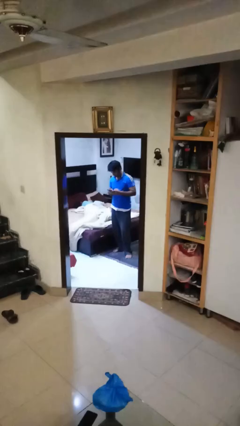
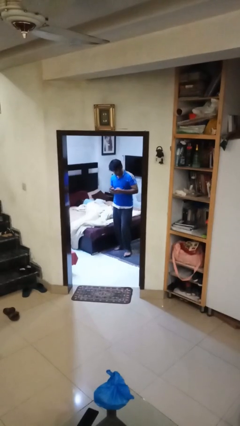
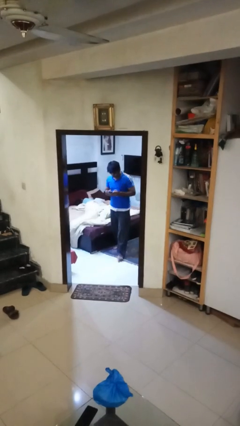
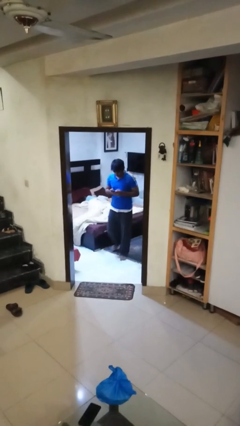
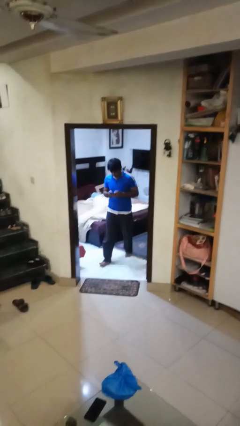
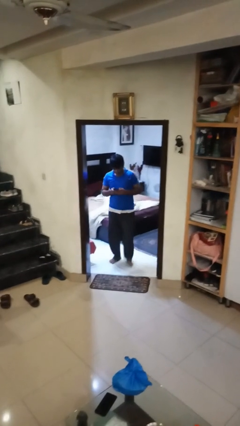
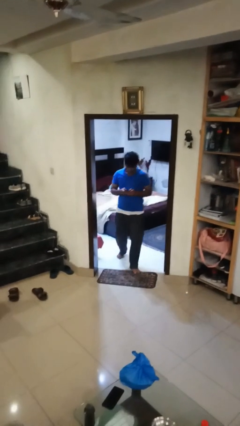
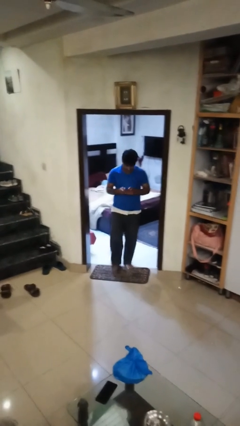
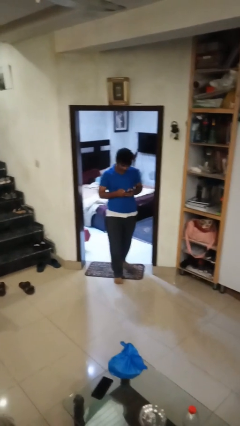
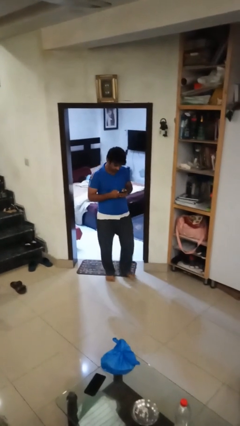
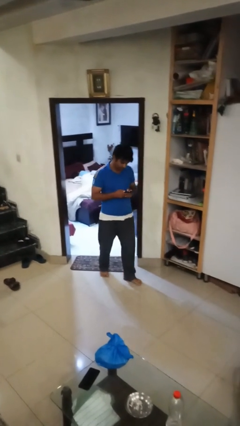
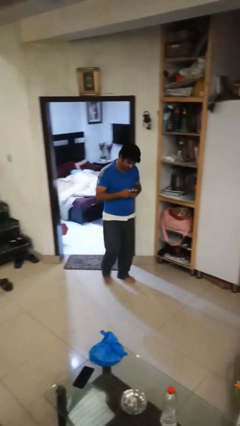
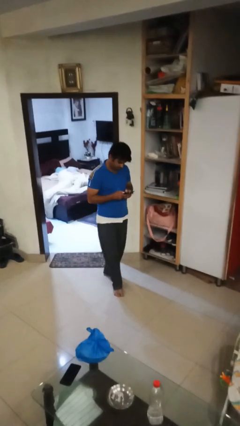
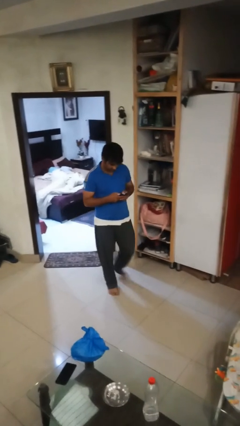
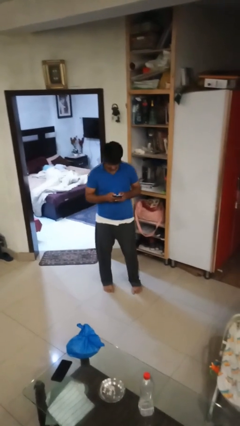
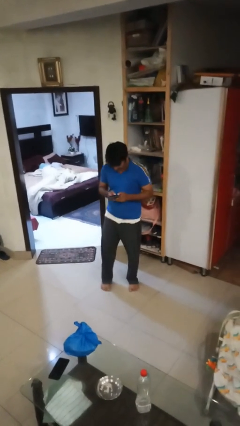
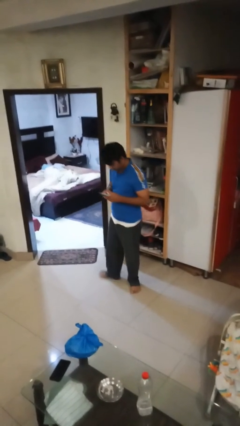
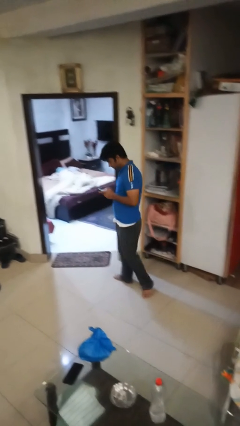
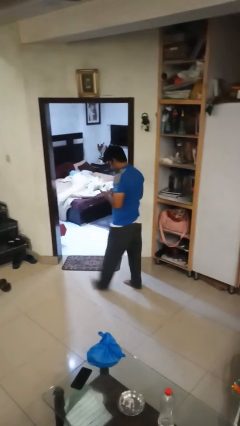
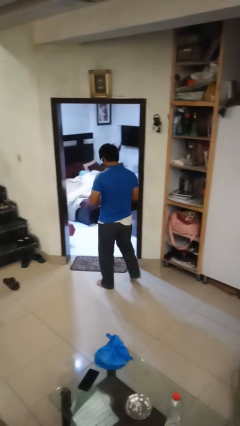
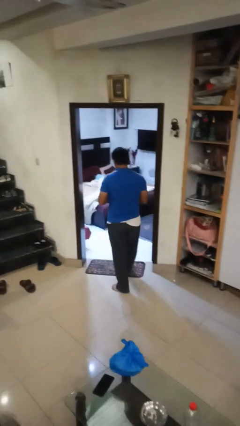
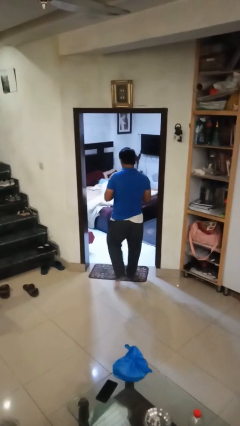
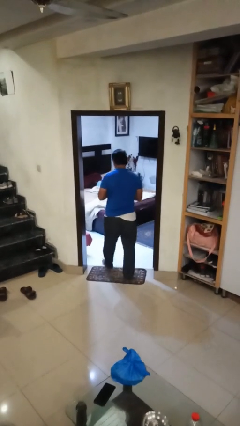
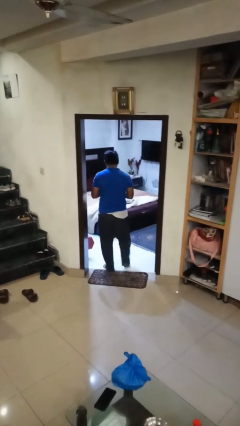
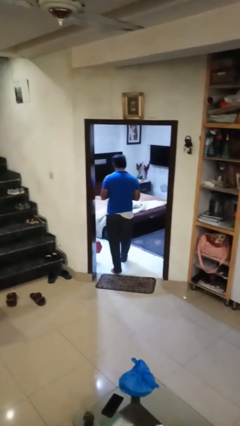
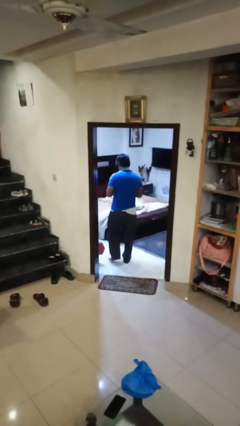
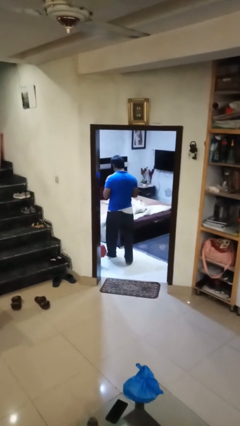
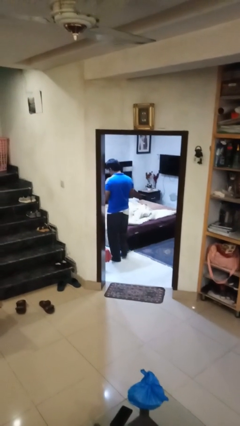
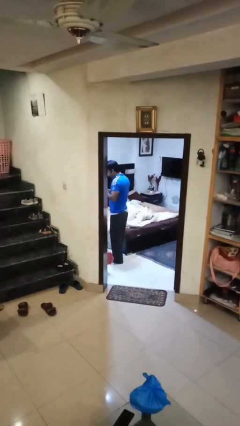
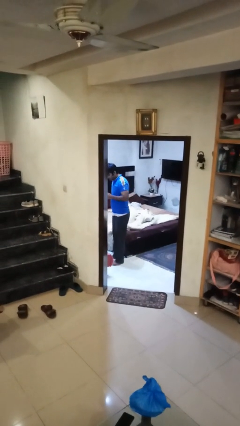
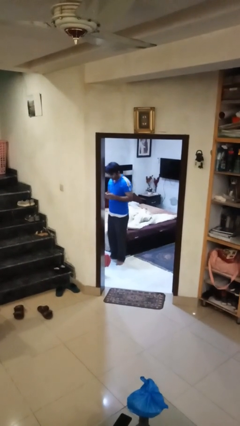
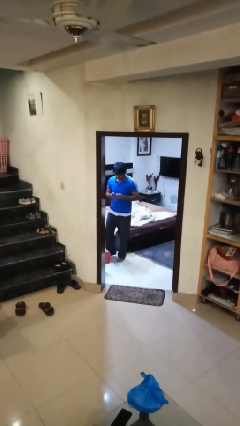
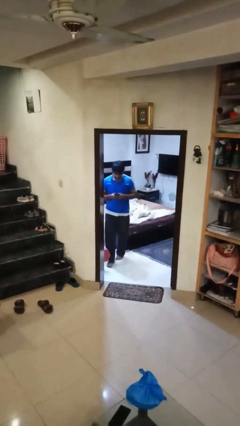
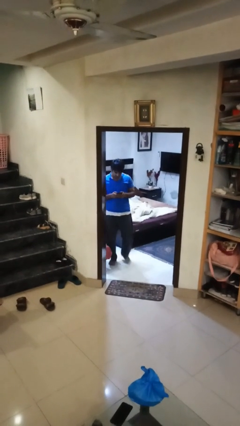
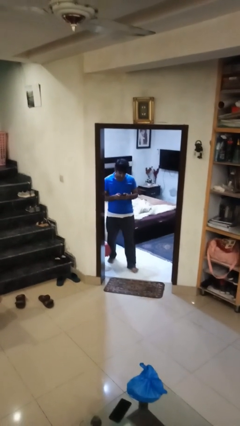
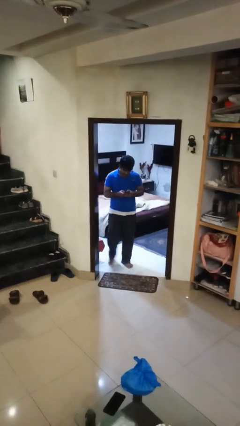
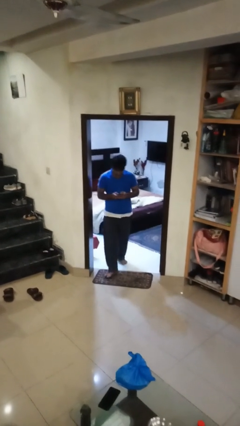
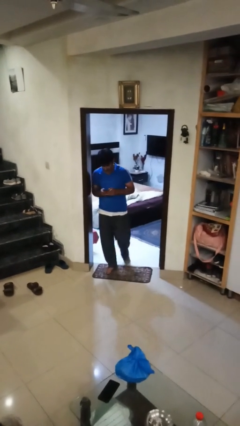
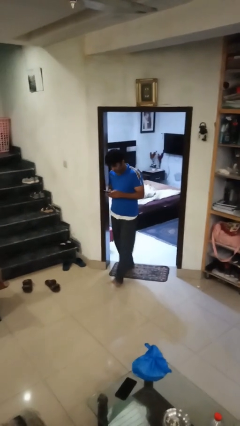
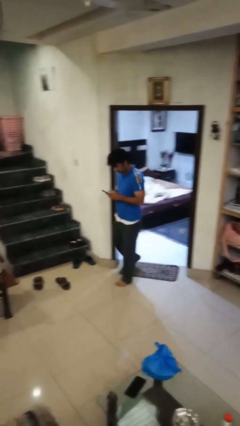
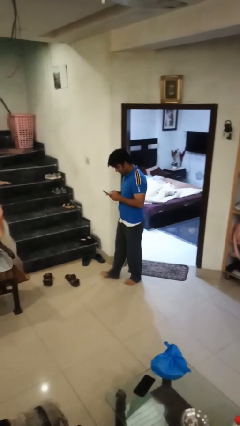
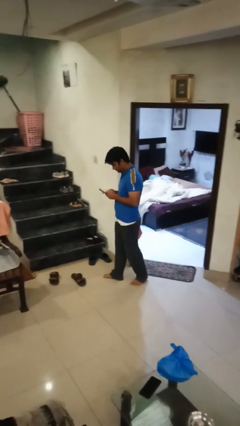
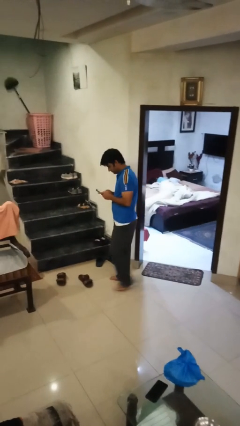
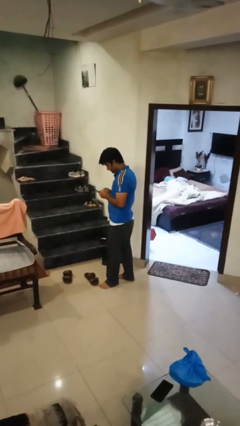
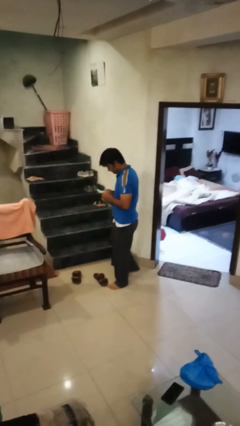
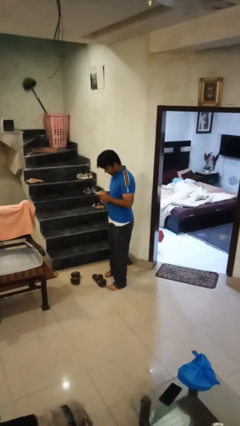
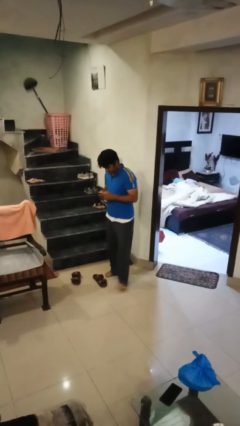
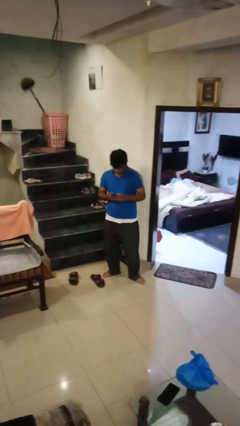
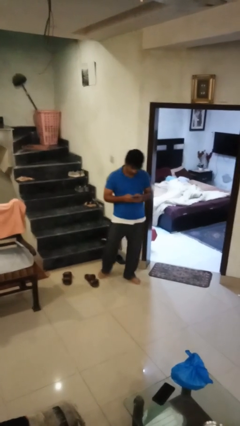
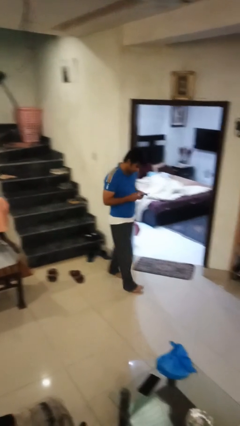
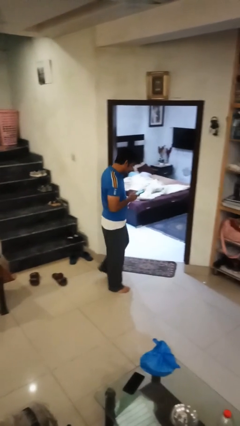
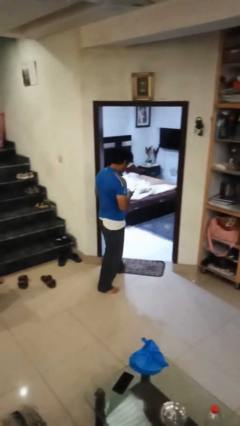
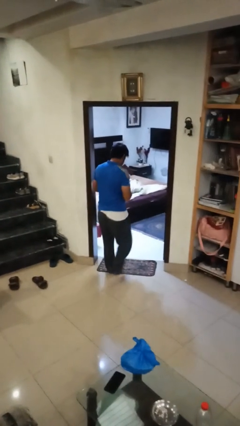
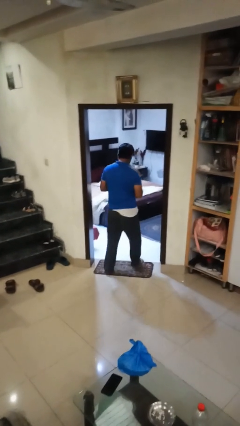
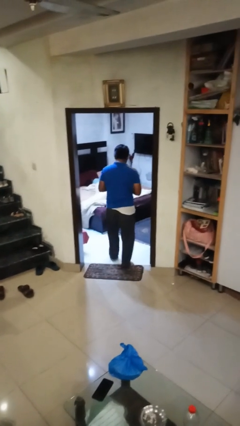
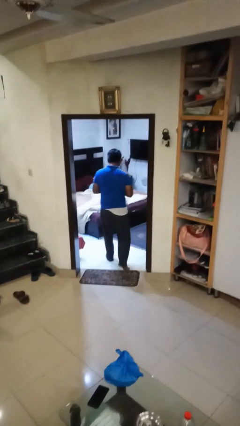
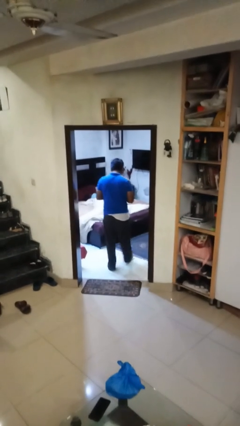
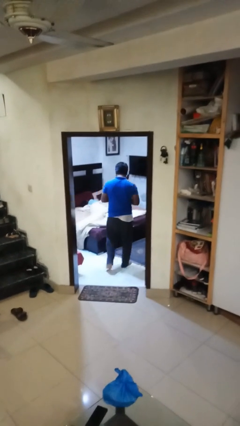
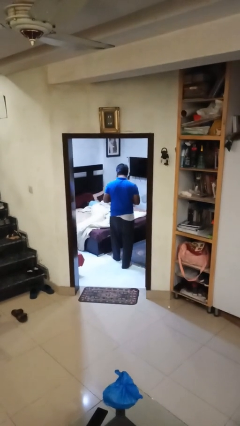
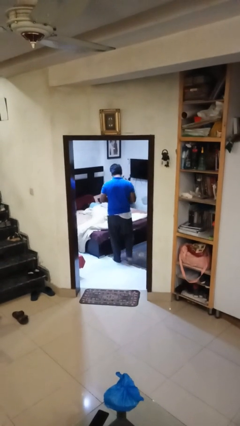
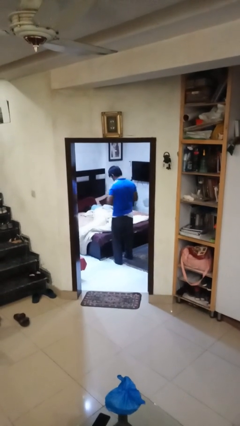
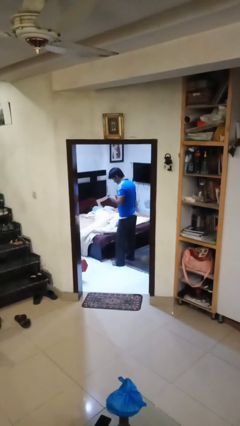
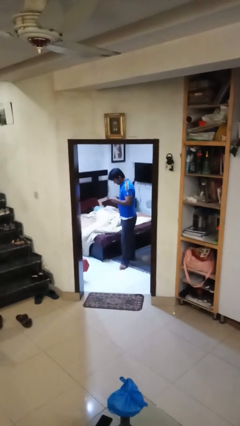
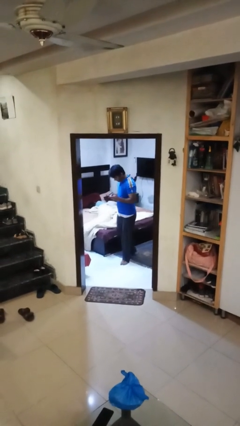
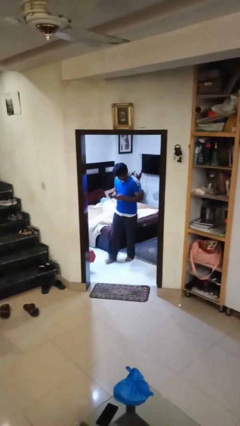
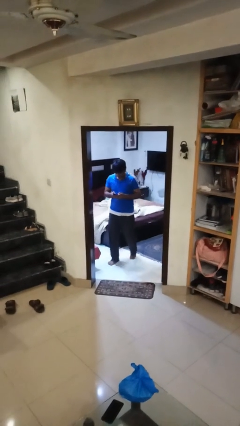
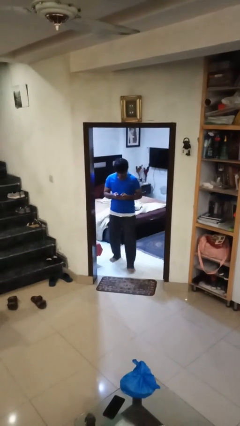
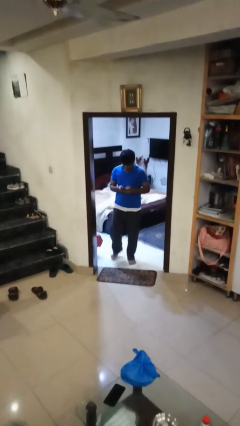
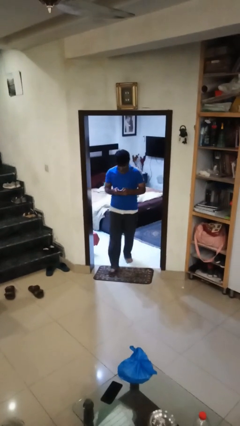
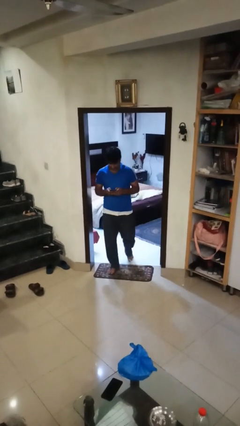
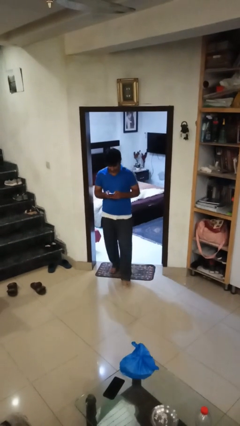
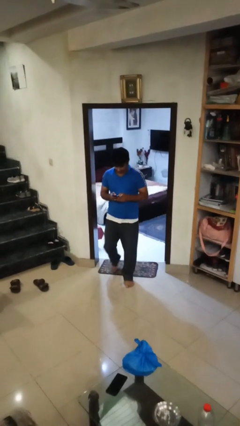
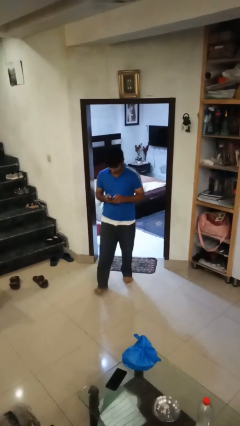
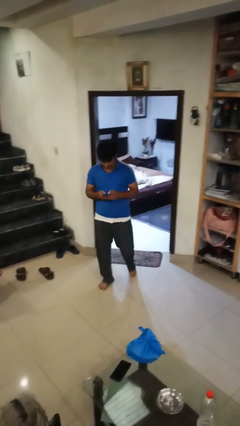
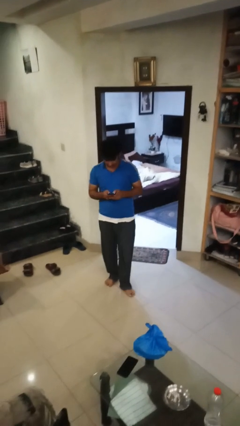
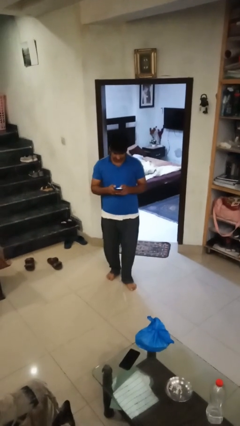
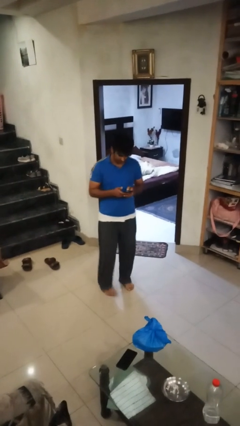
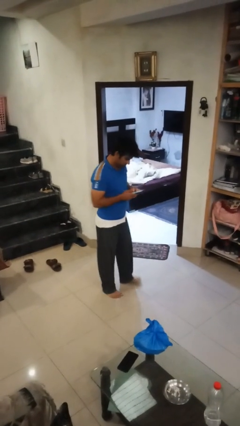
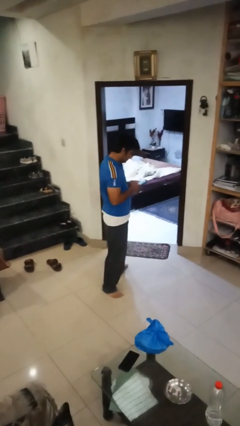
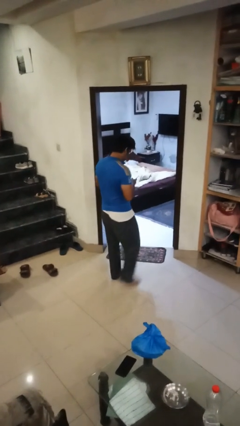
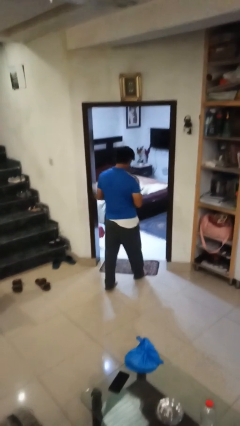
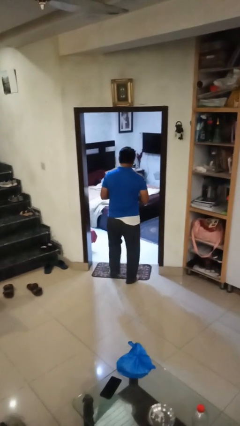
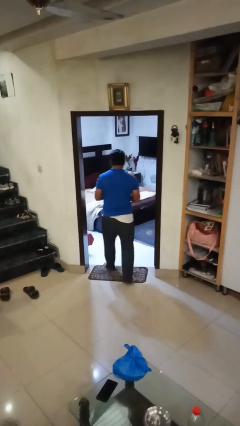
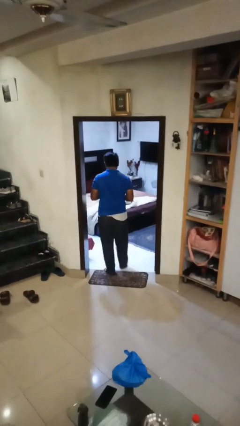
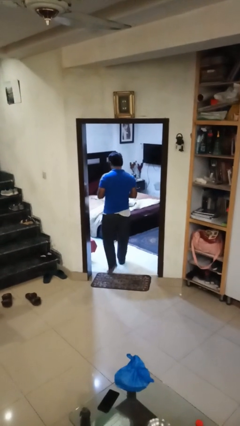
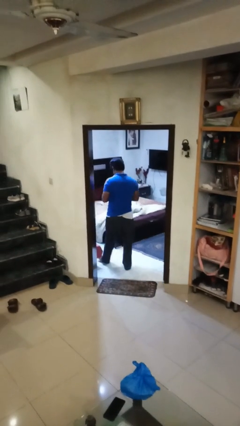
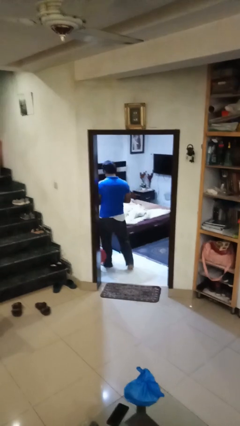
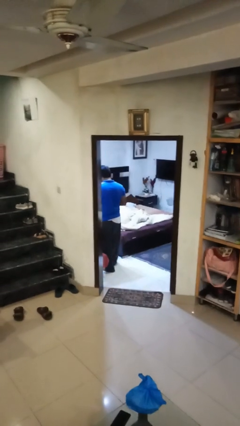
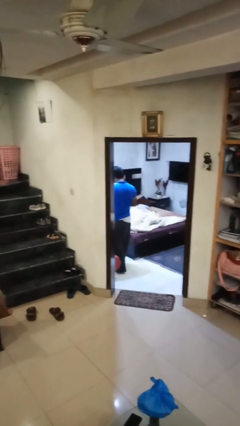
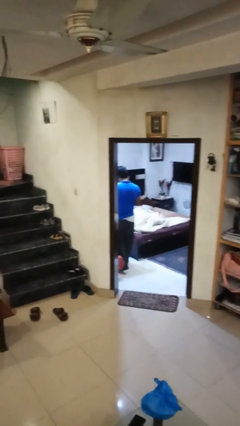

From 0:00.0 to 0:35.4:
person texts on phone

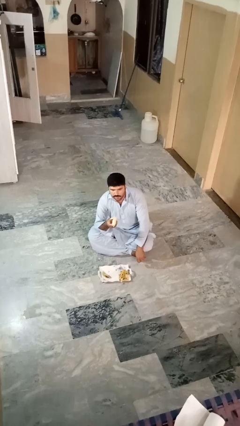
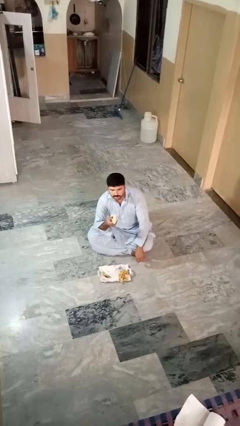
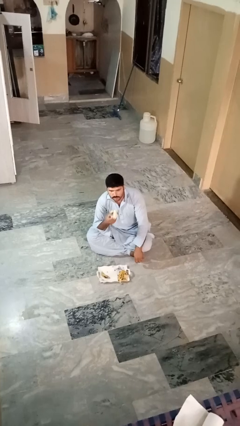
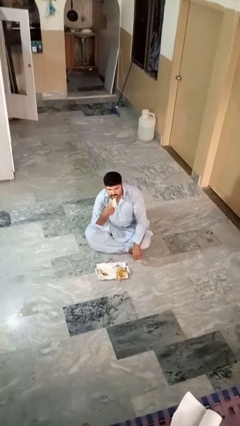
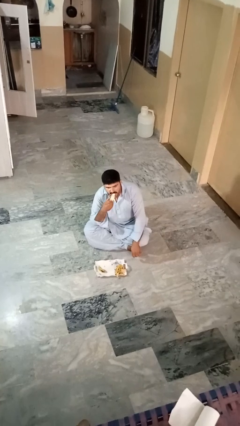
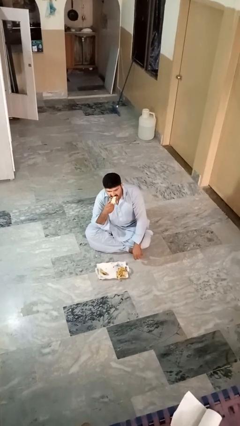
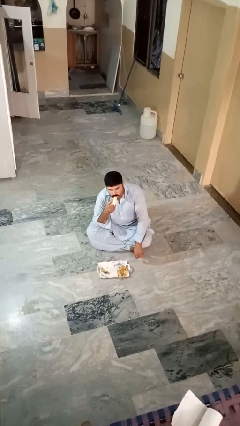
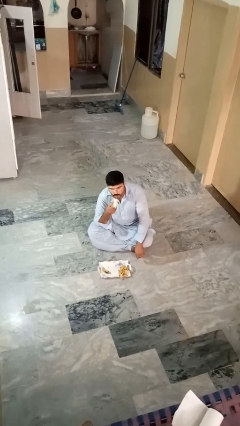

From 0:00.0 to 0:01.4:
person eats banana
